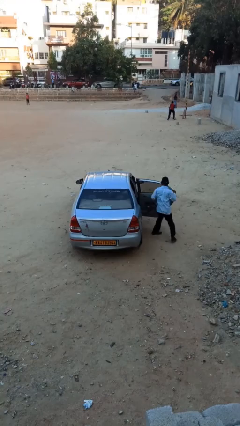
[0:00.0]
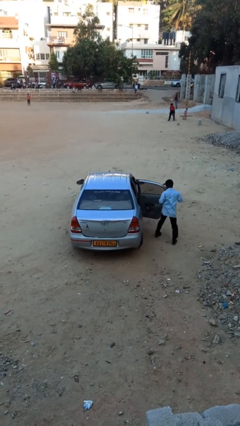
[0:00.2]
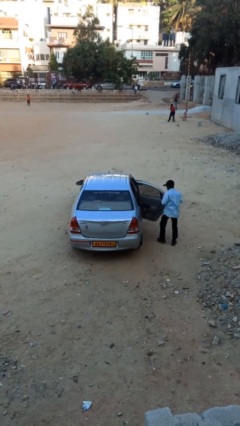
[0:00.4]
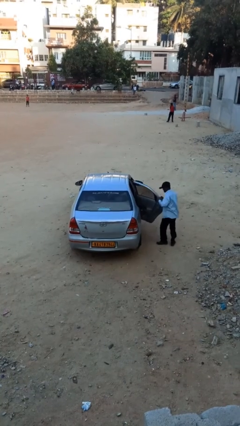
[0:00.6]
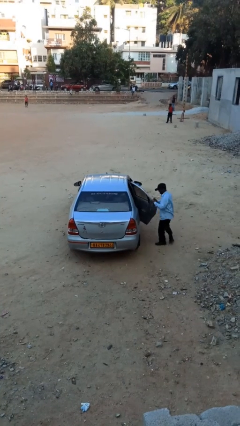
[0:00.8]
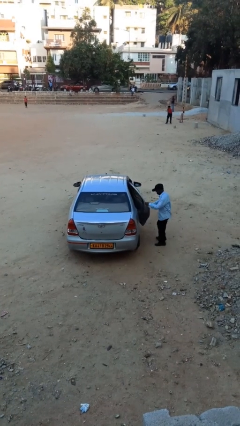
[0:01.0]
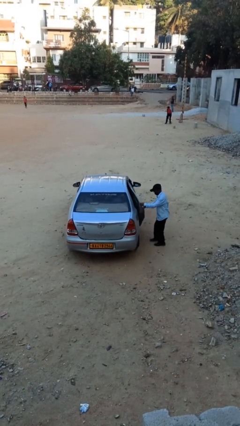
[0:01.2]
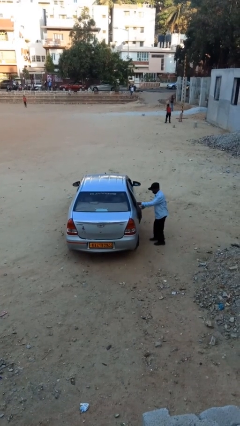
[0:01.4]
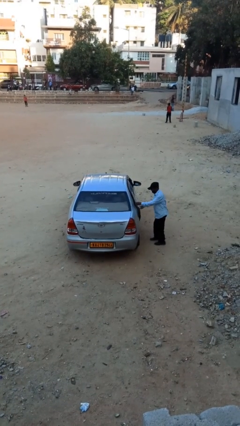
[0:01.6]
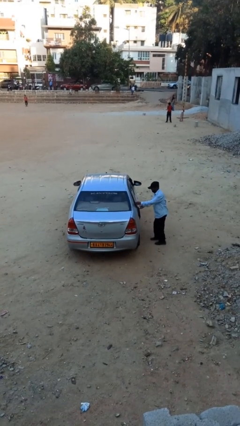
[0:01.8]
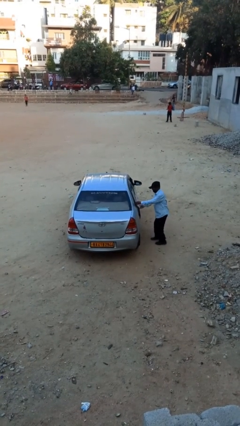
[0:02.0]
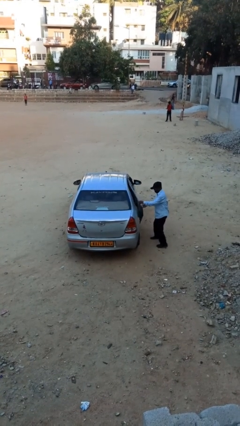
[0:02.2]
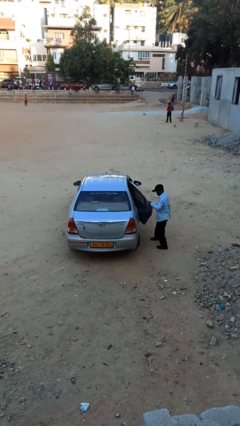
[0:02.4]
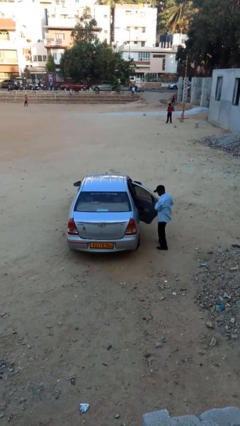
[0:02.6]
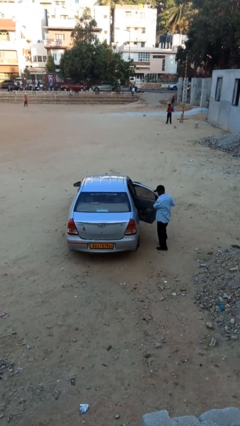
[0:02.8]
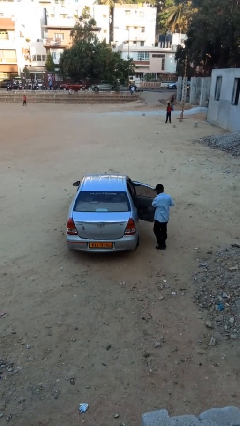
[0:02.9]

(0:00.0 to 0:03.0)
car drops off person

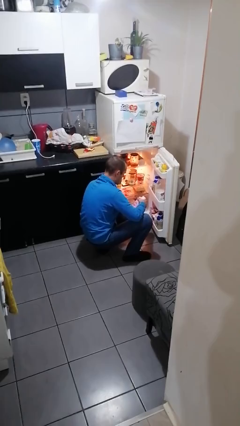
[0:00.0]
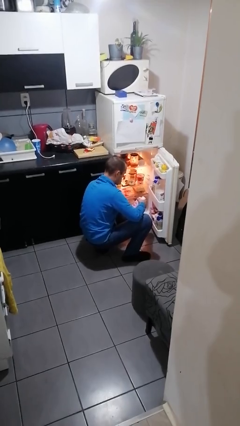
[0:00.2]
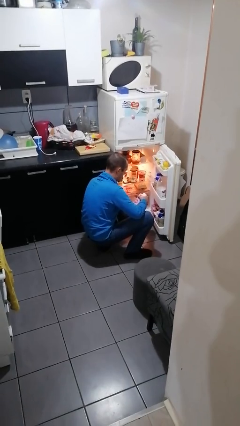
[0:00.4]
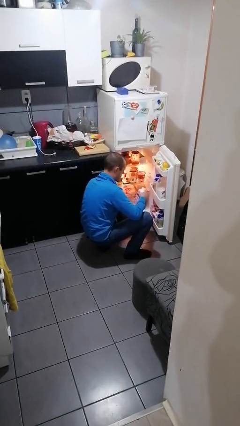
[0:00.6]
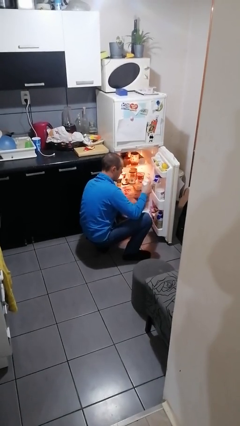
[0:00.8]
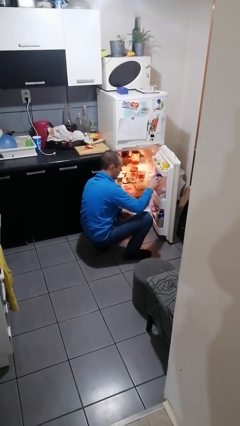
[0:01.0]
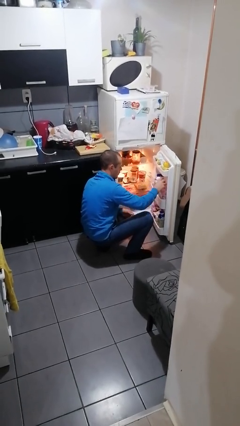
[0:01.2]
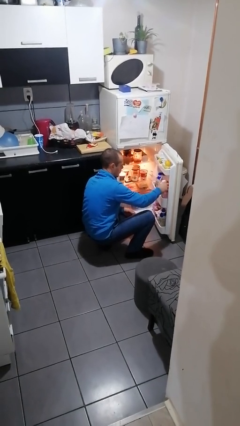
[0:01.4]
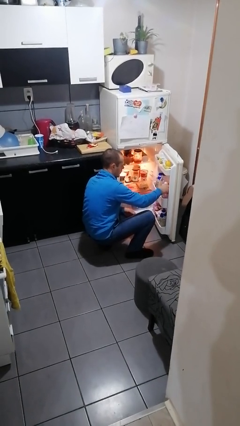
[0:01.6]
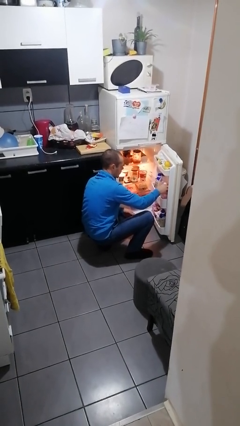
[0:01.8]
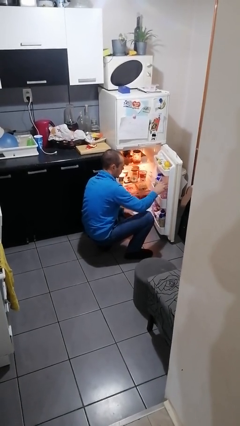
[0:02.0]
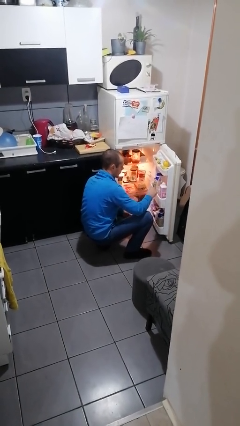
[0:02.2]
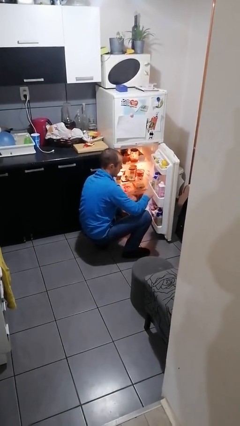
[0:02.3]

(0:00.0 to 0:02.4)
person puts object into refrigerator

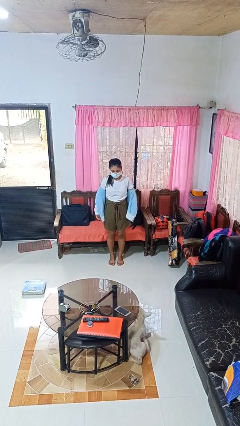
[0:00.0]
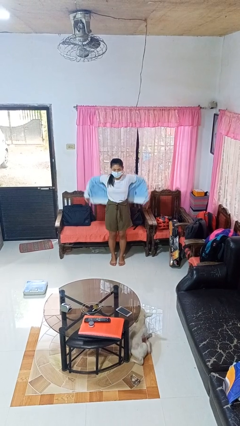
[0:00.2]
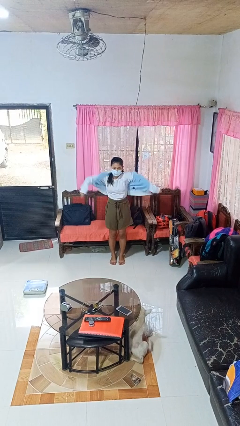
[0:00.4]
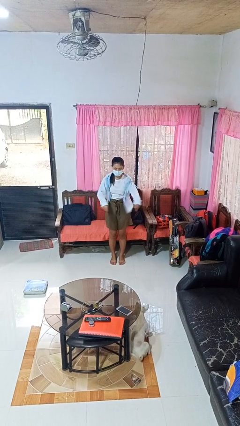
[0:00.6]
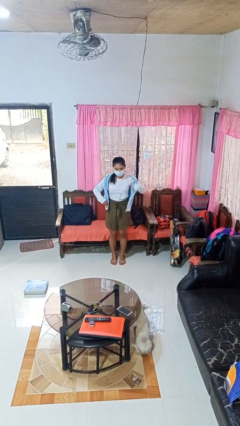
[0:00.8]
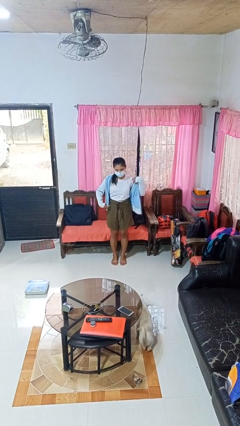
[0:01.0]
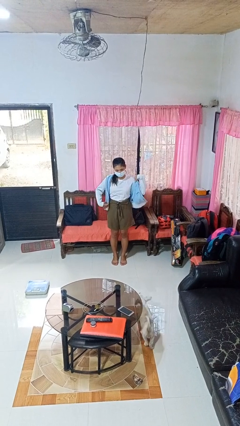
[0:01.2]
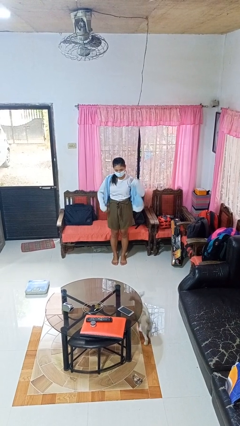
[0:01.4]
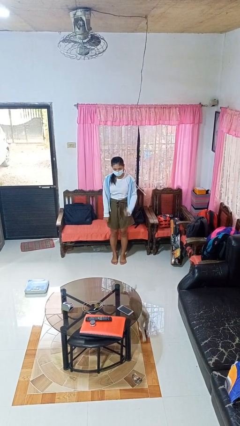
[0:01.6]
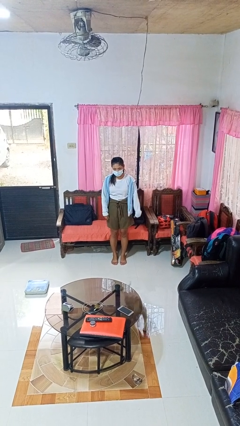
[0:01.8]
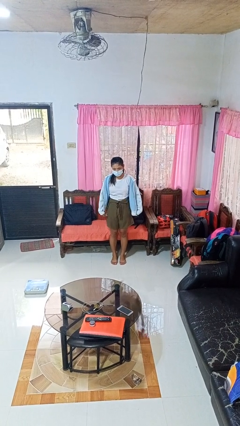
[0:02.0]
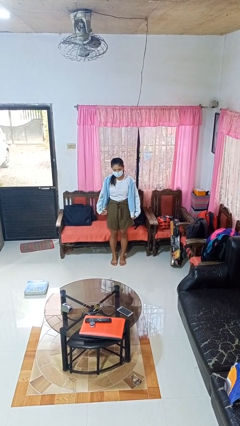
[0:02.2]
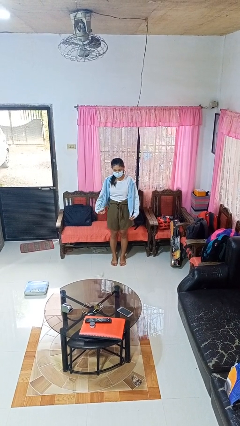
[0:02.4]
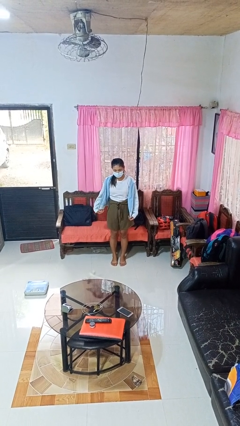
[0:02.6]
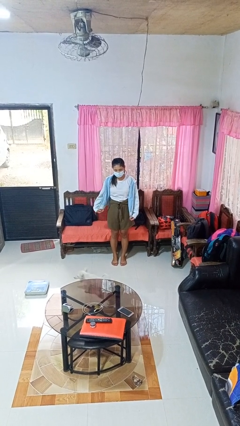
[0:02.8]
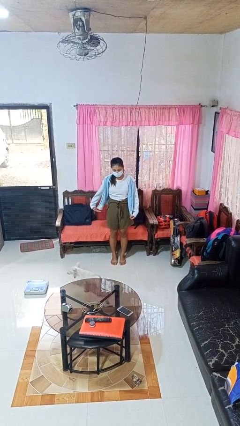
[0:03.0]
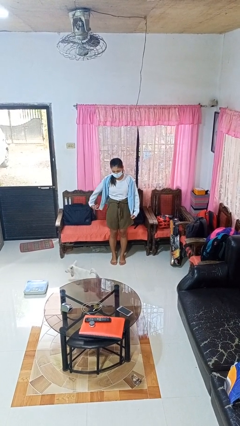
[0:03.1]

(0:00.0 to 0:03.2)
person puts on jacket

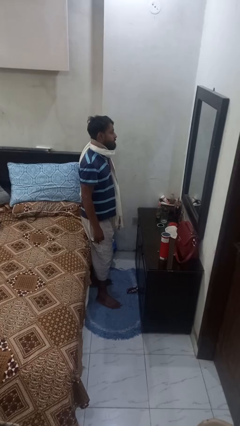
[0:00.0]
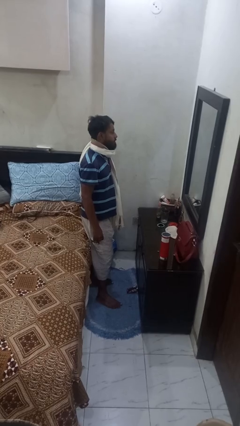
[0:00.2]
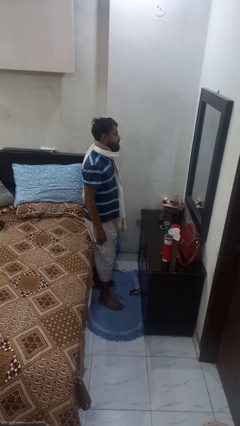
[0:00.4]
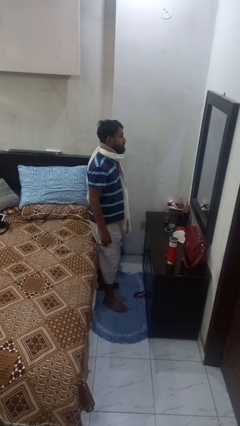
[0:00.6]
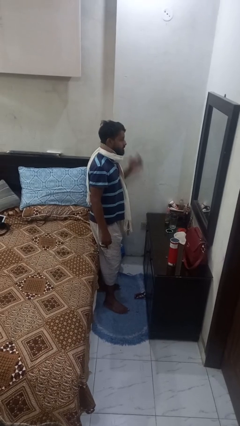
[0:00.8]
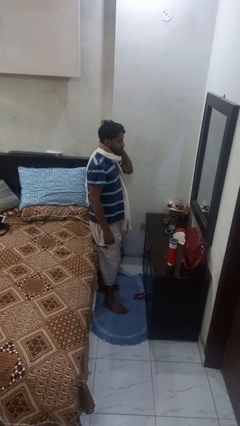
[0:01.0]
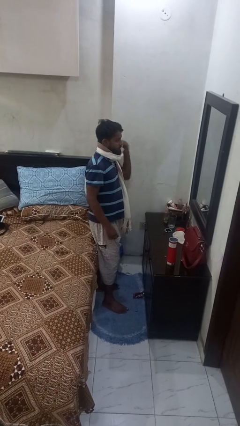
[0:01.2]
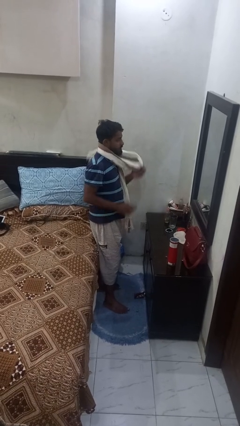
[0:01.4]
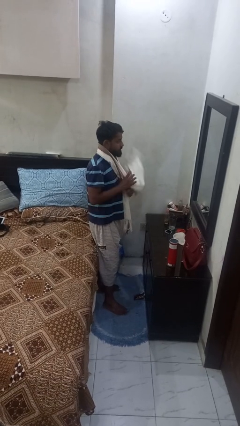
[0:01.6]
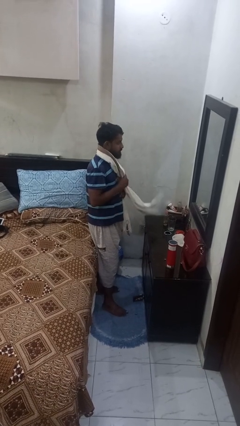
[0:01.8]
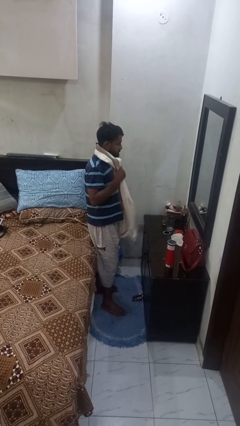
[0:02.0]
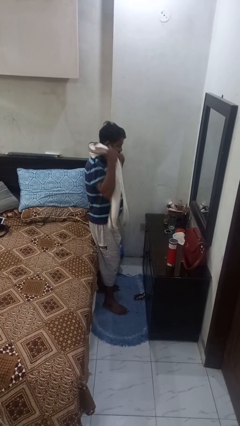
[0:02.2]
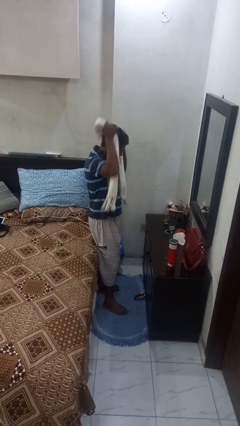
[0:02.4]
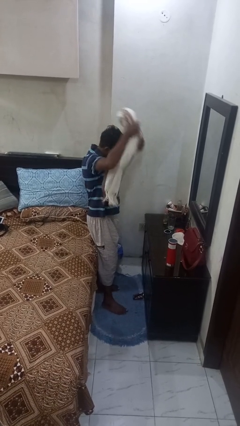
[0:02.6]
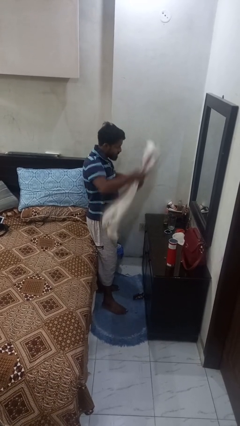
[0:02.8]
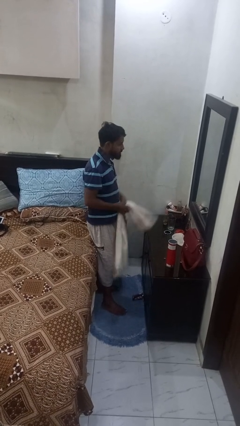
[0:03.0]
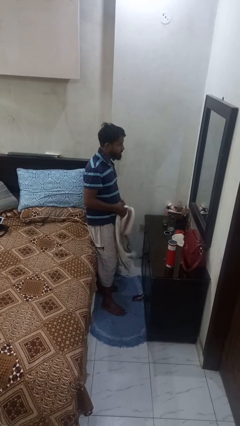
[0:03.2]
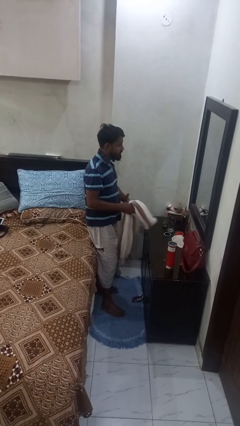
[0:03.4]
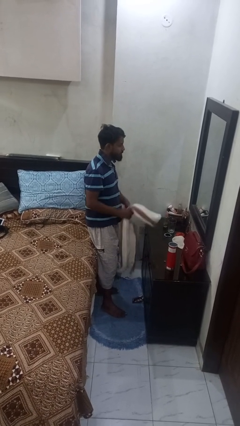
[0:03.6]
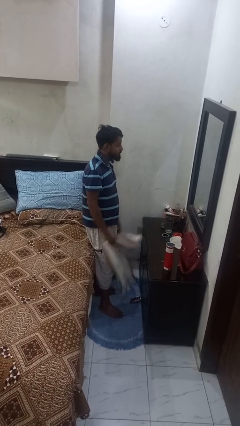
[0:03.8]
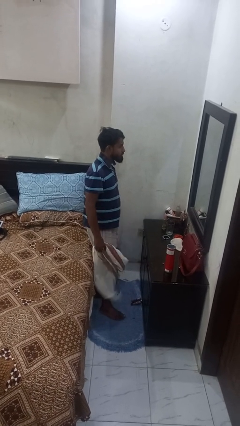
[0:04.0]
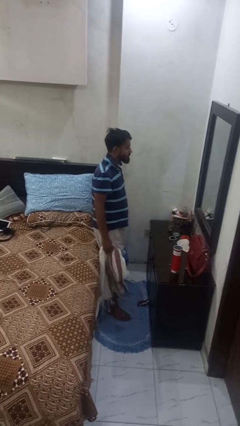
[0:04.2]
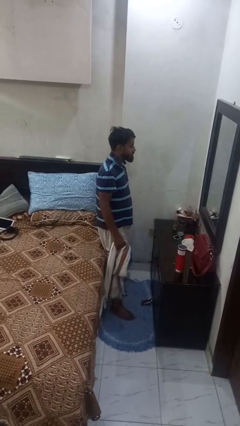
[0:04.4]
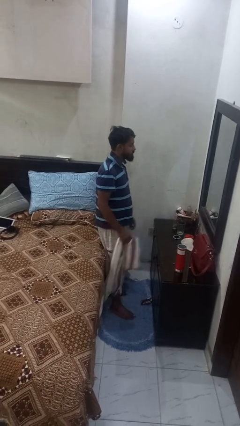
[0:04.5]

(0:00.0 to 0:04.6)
person takes off scarf

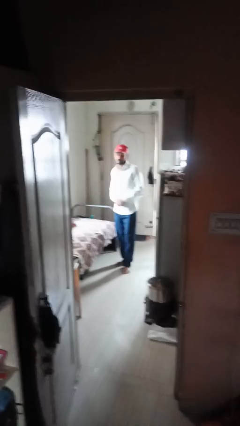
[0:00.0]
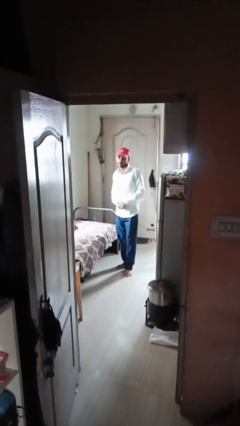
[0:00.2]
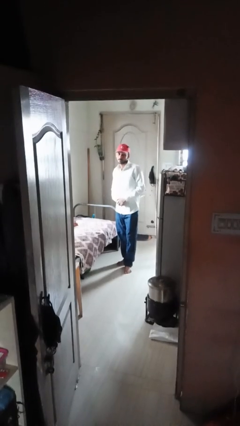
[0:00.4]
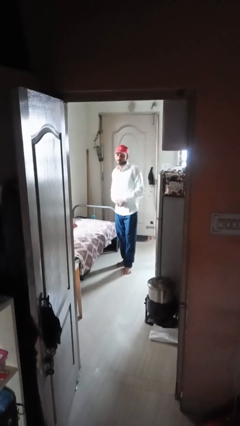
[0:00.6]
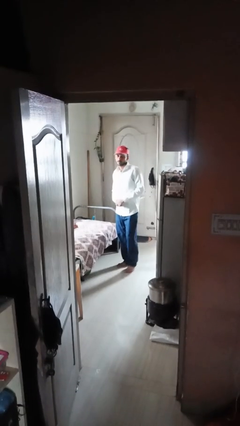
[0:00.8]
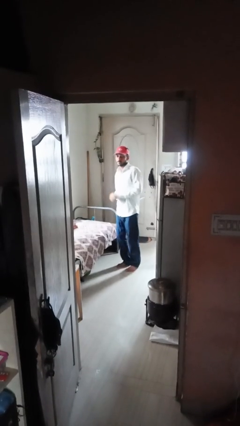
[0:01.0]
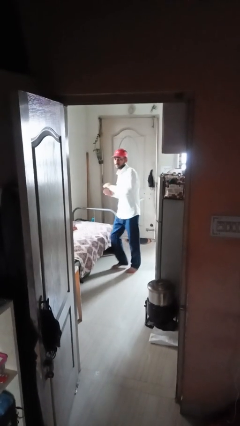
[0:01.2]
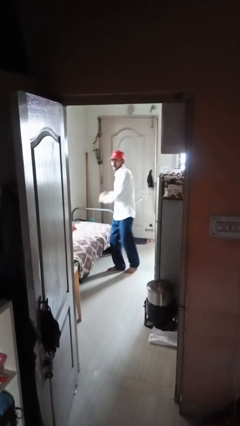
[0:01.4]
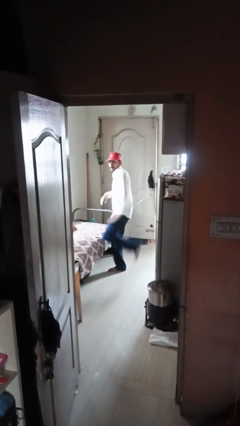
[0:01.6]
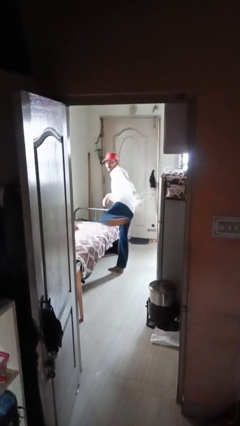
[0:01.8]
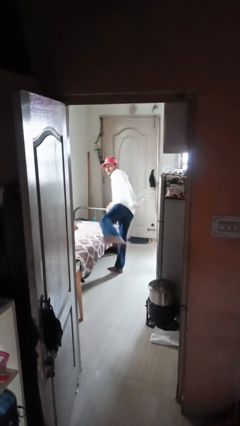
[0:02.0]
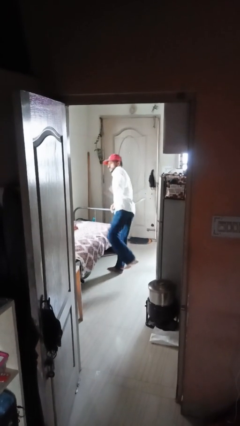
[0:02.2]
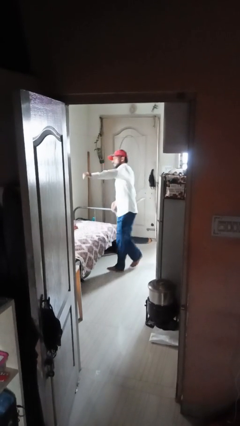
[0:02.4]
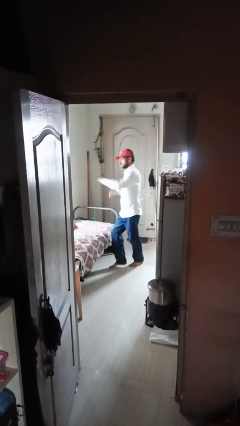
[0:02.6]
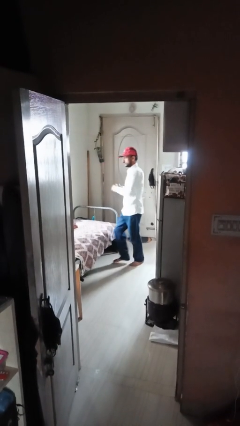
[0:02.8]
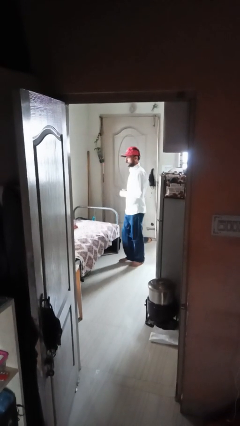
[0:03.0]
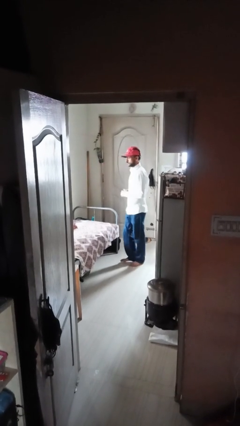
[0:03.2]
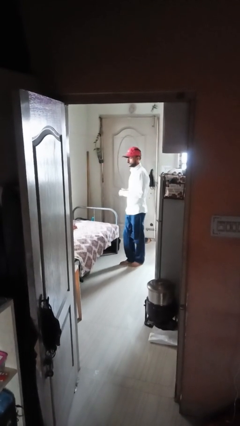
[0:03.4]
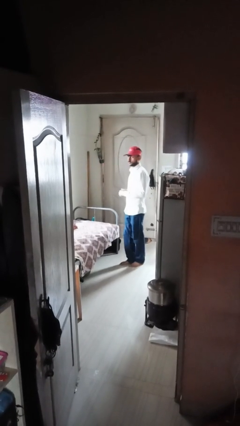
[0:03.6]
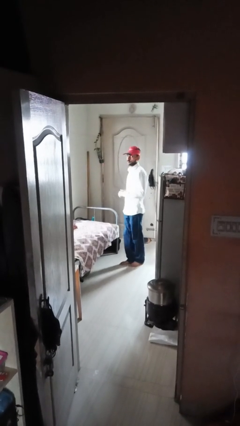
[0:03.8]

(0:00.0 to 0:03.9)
person karate kicks

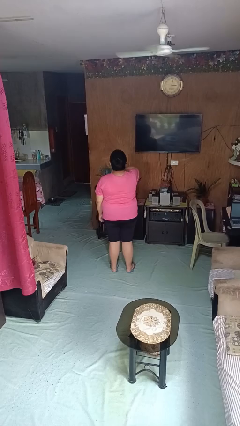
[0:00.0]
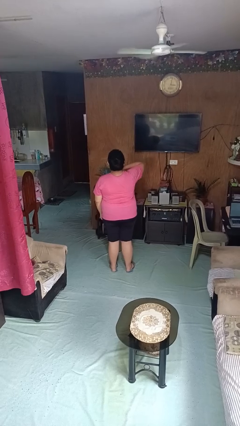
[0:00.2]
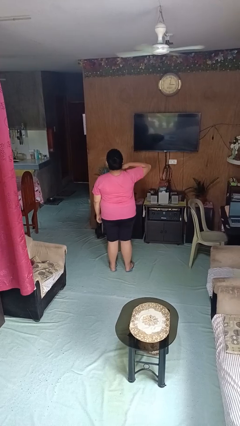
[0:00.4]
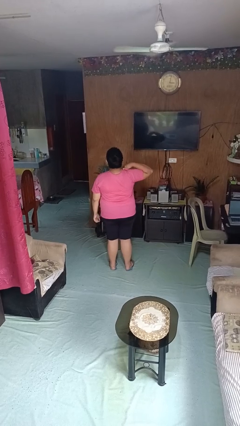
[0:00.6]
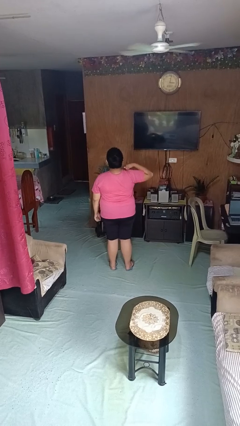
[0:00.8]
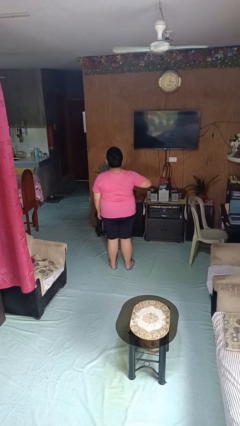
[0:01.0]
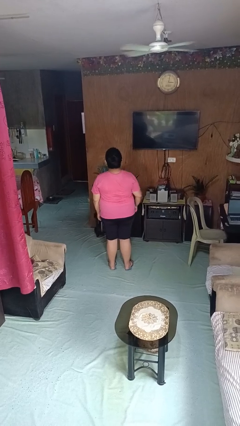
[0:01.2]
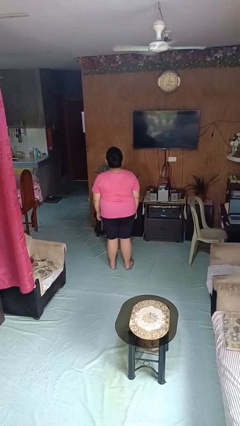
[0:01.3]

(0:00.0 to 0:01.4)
person gestures cut
